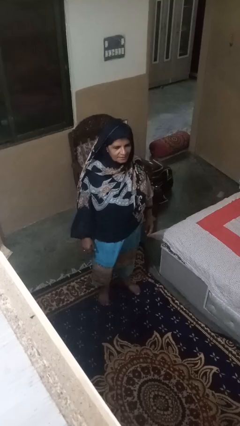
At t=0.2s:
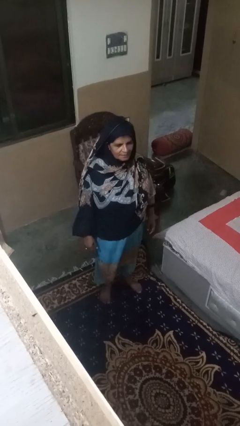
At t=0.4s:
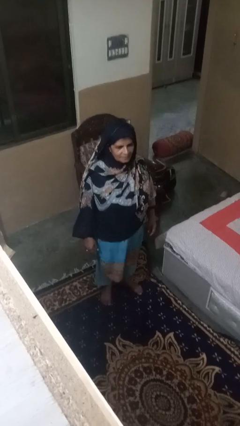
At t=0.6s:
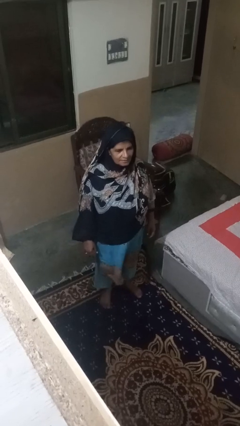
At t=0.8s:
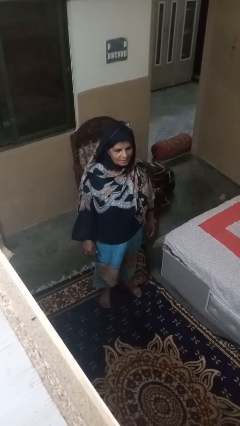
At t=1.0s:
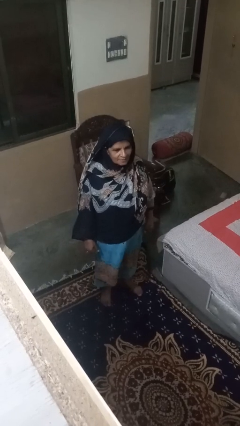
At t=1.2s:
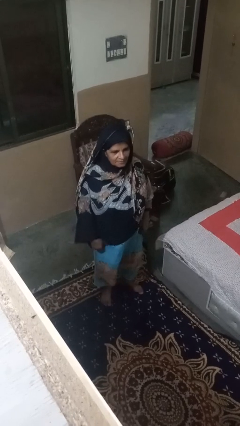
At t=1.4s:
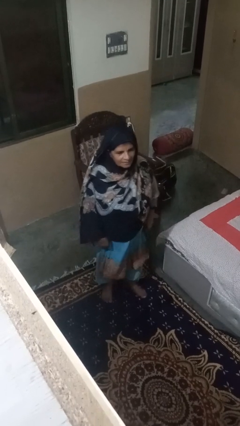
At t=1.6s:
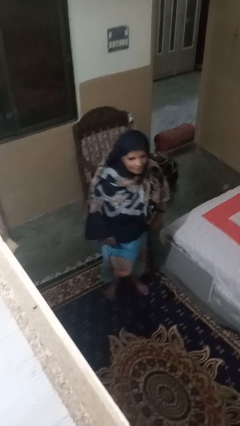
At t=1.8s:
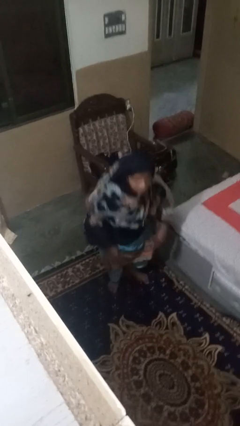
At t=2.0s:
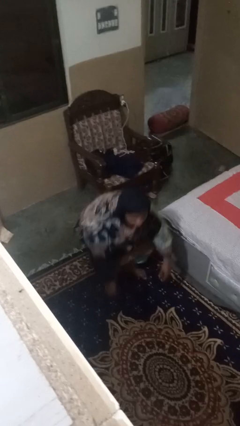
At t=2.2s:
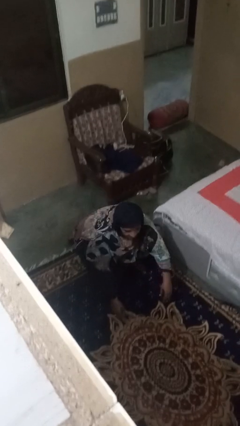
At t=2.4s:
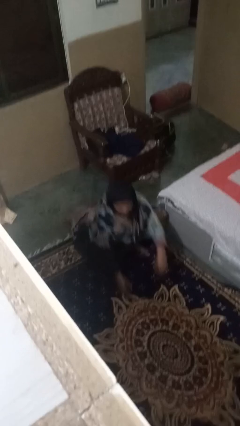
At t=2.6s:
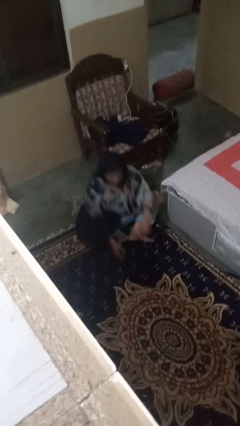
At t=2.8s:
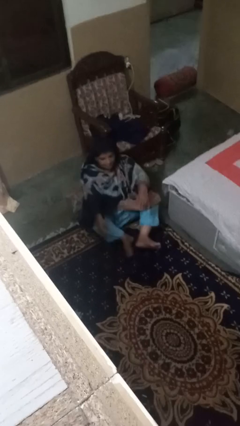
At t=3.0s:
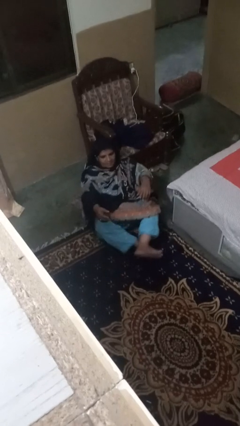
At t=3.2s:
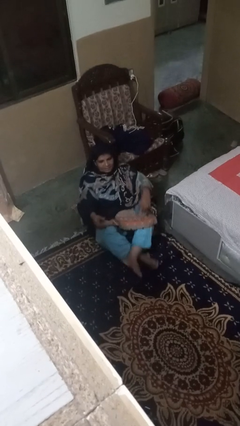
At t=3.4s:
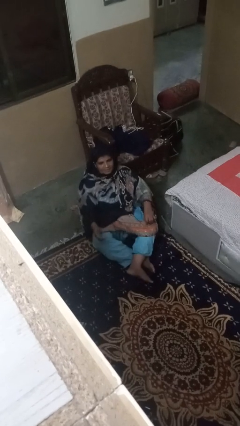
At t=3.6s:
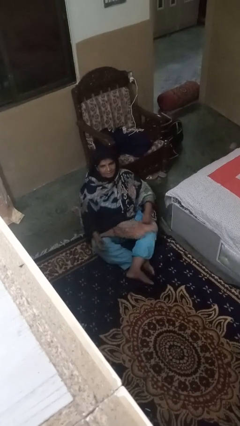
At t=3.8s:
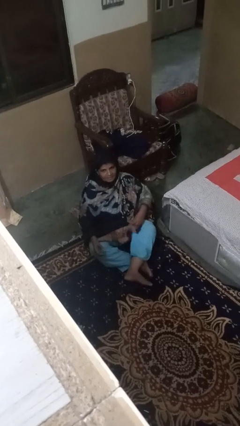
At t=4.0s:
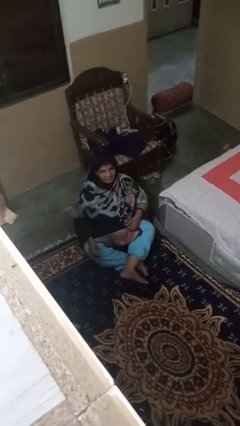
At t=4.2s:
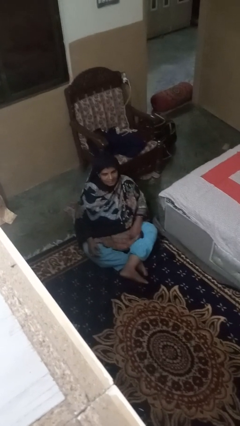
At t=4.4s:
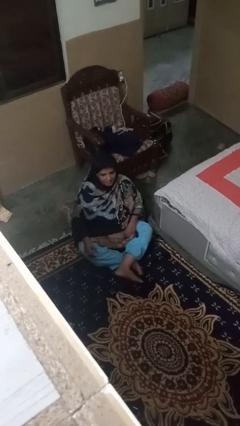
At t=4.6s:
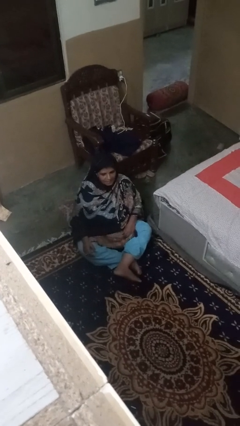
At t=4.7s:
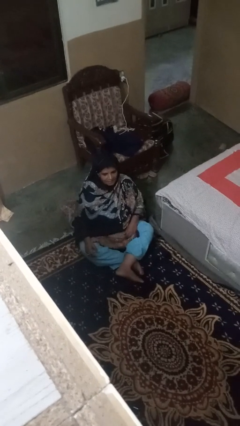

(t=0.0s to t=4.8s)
person sits crisscross

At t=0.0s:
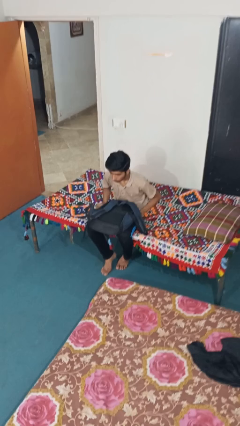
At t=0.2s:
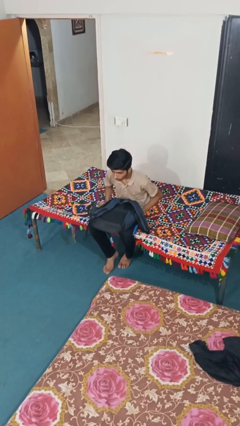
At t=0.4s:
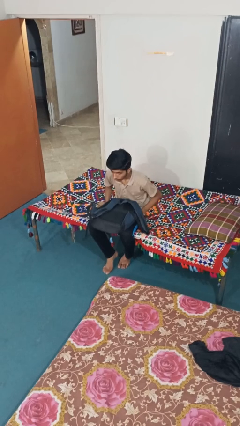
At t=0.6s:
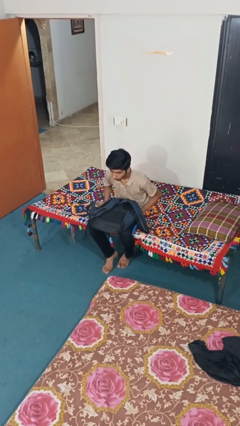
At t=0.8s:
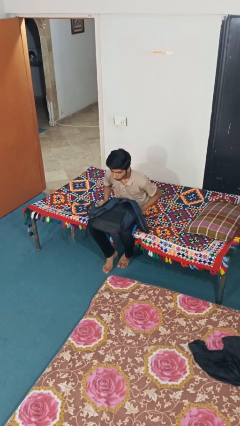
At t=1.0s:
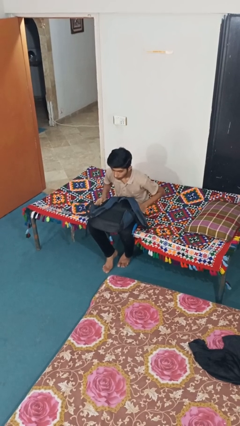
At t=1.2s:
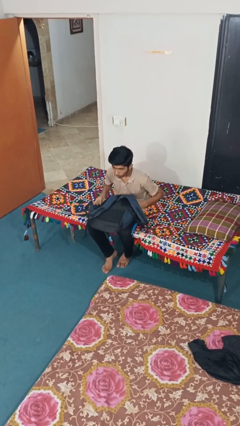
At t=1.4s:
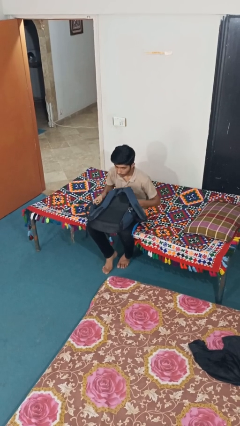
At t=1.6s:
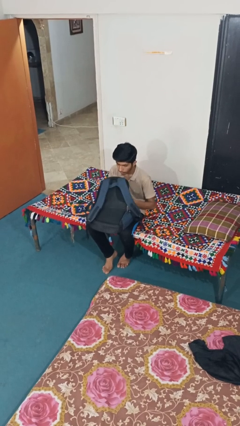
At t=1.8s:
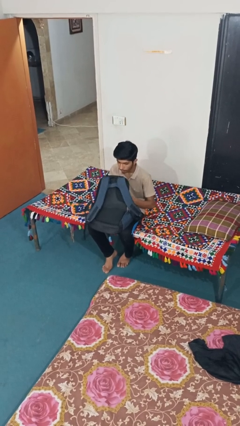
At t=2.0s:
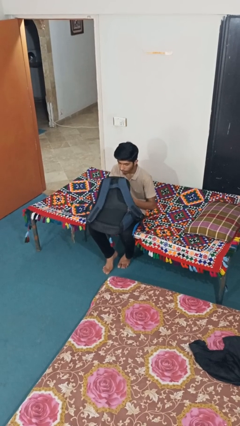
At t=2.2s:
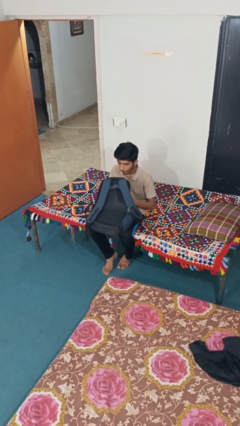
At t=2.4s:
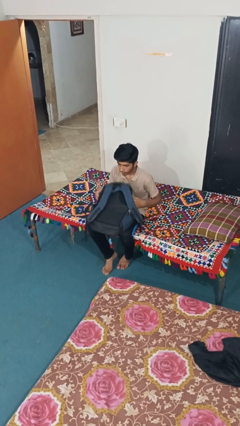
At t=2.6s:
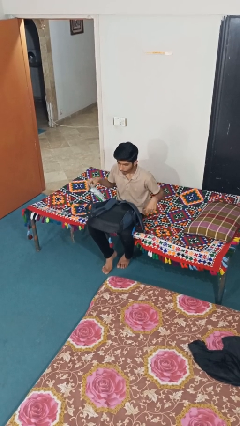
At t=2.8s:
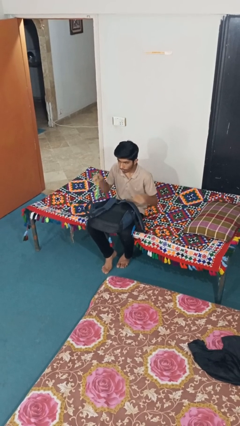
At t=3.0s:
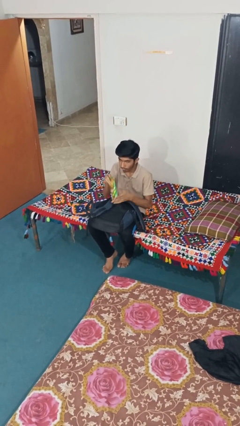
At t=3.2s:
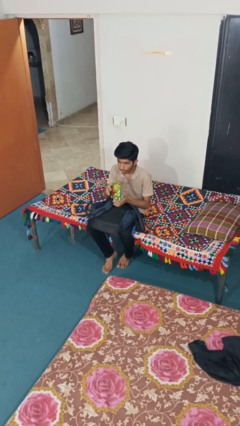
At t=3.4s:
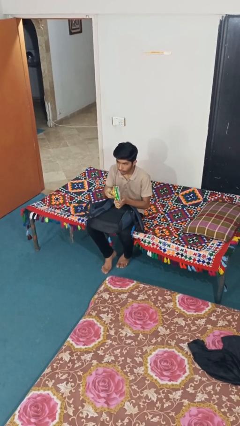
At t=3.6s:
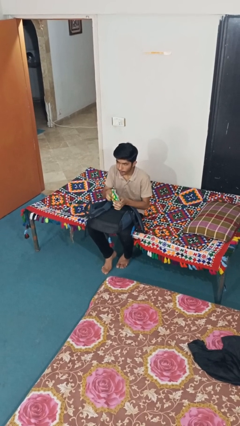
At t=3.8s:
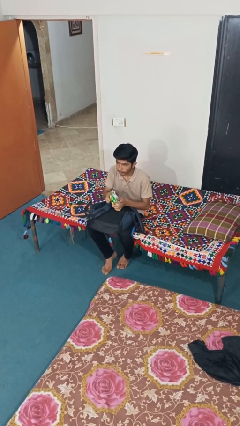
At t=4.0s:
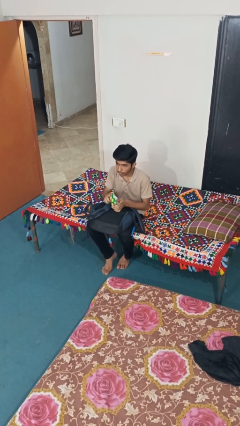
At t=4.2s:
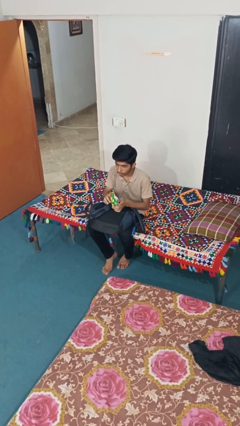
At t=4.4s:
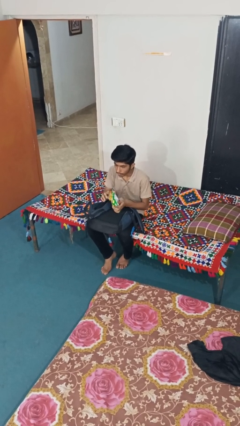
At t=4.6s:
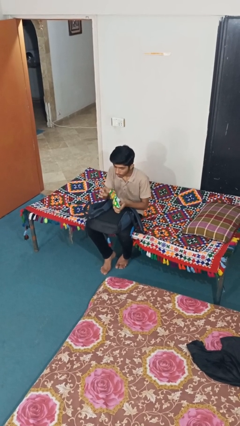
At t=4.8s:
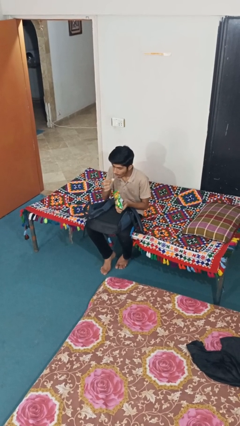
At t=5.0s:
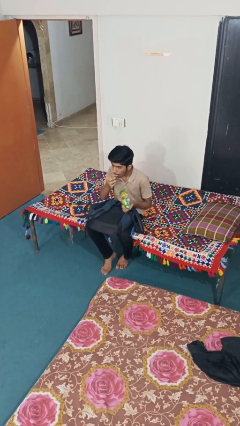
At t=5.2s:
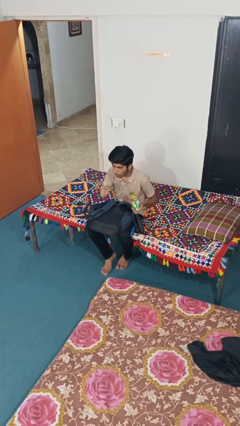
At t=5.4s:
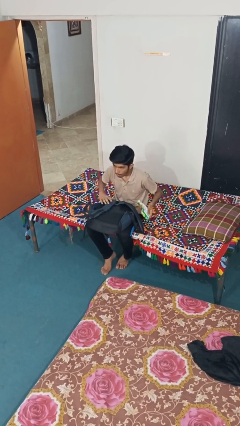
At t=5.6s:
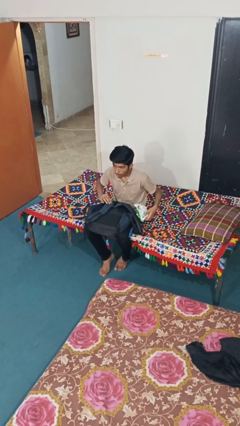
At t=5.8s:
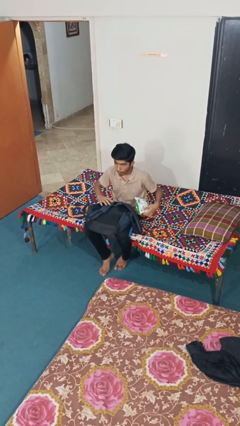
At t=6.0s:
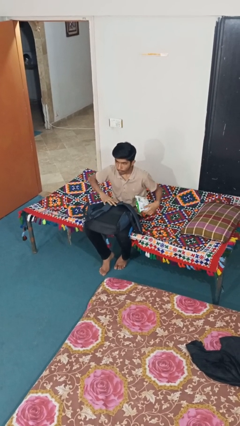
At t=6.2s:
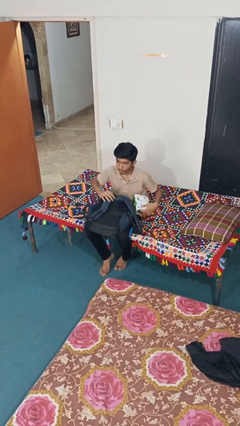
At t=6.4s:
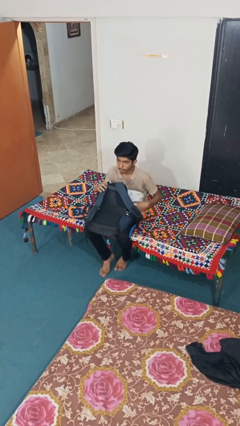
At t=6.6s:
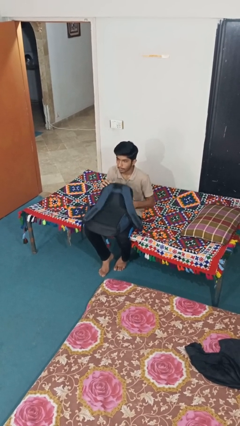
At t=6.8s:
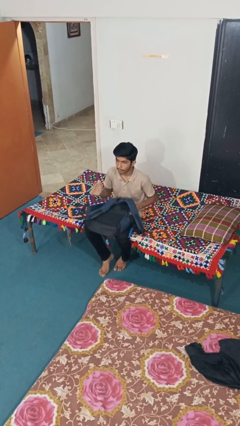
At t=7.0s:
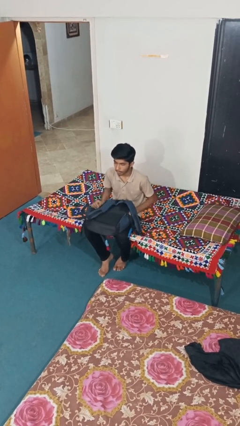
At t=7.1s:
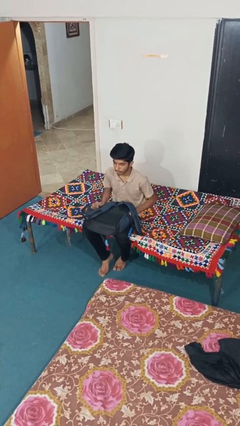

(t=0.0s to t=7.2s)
person eats snack from bag

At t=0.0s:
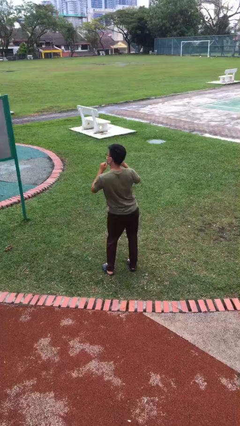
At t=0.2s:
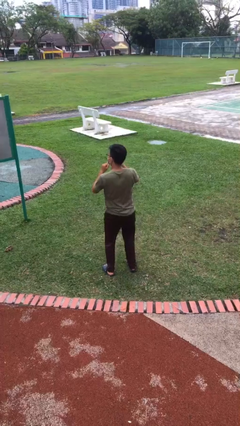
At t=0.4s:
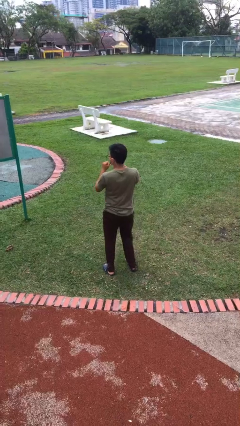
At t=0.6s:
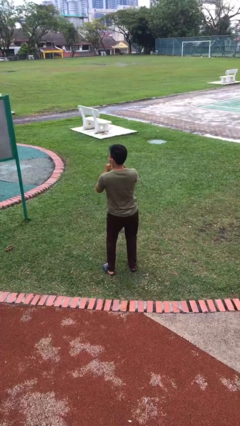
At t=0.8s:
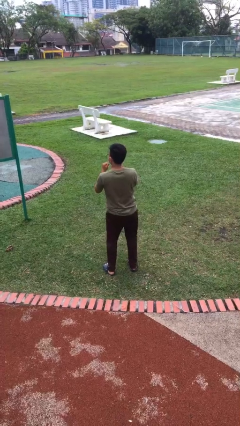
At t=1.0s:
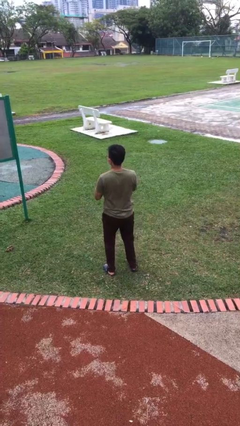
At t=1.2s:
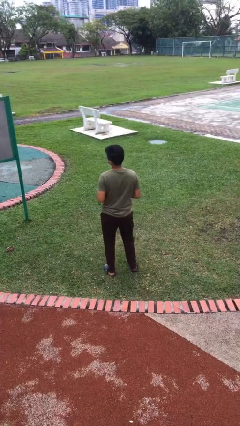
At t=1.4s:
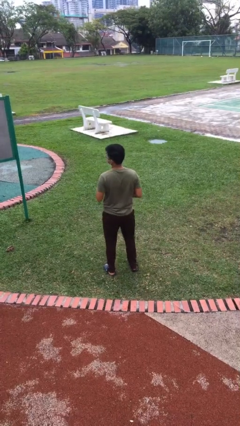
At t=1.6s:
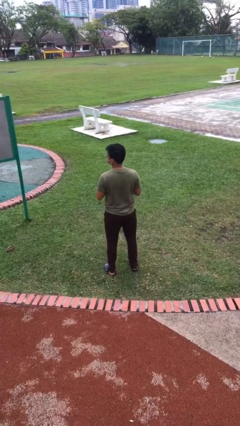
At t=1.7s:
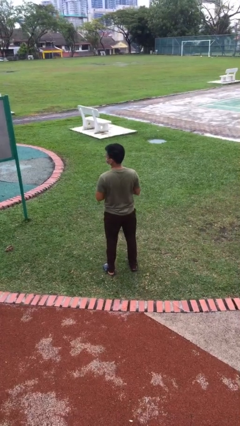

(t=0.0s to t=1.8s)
person wiggles hips

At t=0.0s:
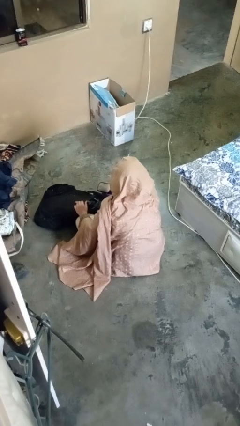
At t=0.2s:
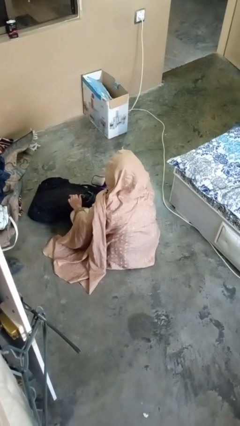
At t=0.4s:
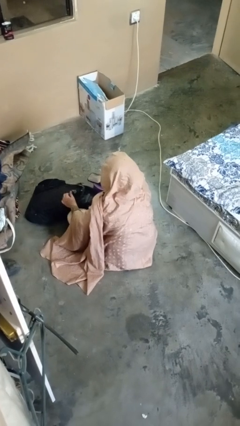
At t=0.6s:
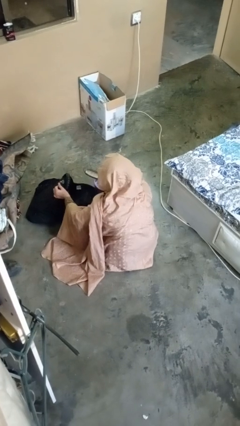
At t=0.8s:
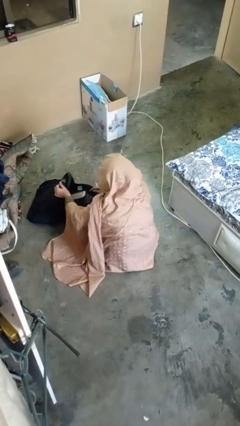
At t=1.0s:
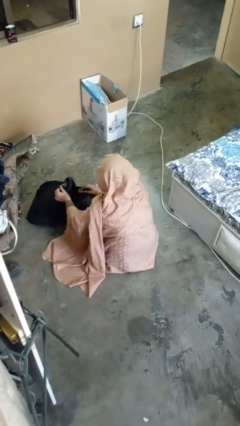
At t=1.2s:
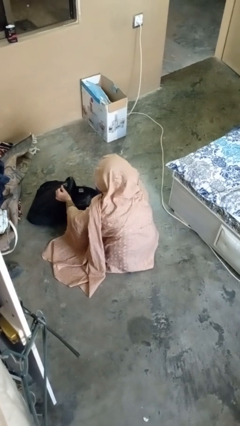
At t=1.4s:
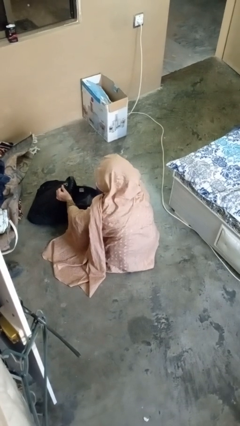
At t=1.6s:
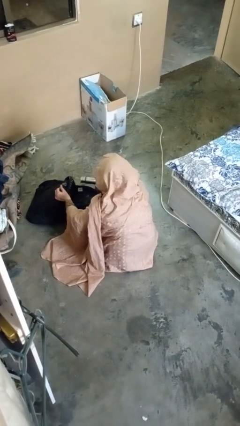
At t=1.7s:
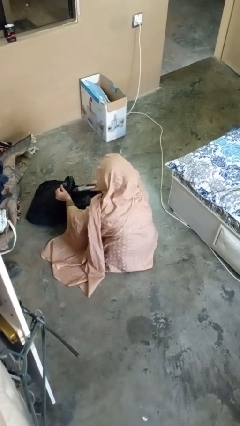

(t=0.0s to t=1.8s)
person puts object into backpack

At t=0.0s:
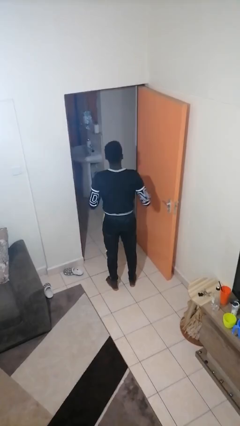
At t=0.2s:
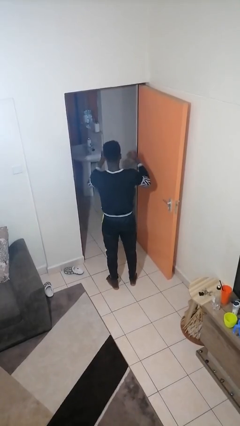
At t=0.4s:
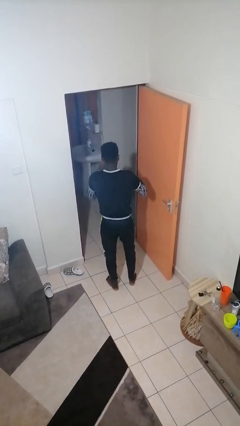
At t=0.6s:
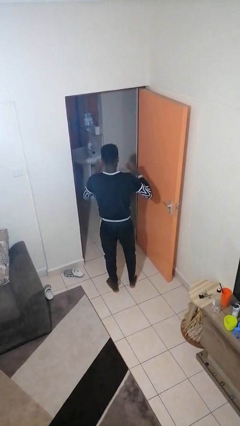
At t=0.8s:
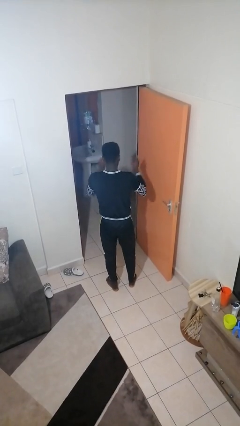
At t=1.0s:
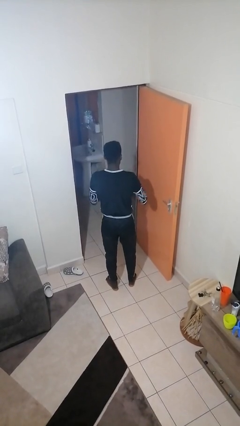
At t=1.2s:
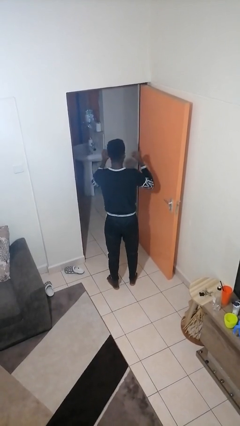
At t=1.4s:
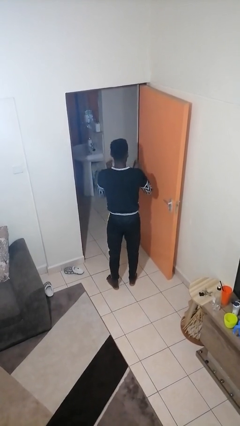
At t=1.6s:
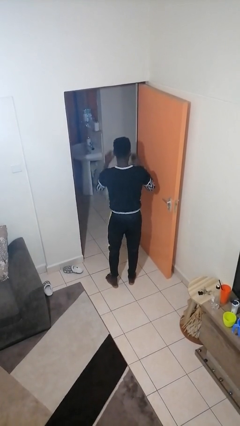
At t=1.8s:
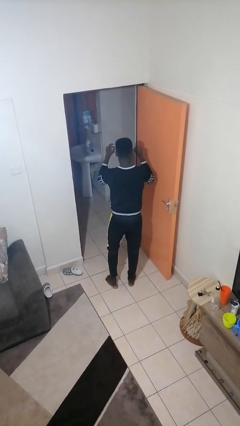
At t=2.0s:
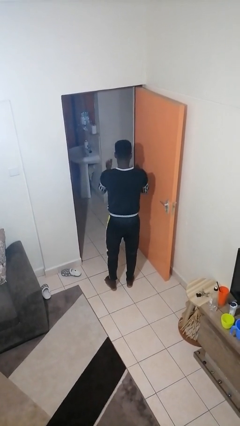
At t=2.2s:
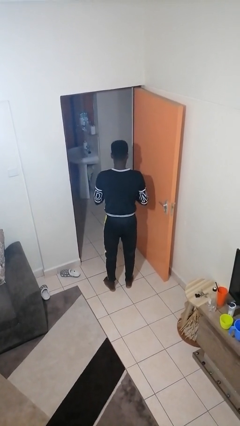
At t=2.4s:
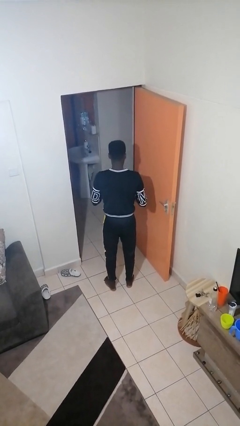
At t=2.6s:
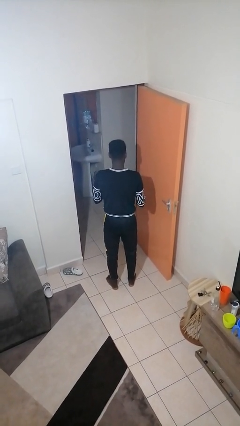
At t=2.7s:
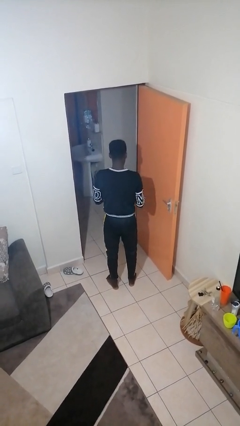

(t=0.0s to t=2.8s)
person snaps fingers
